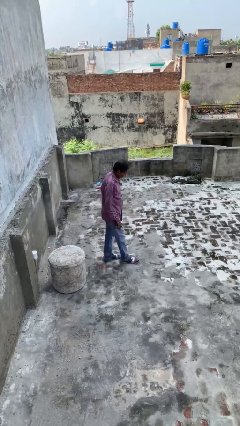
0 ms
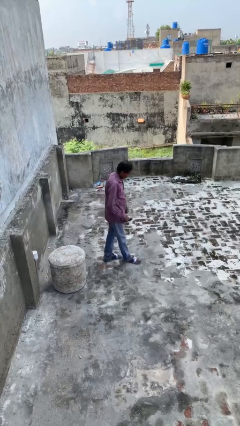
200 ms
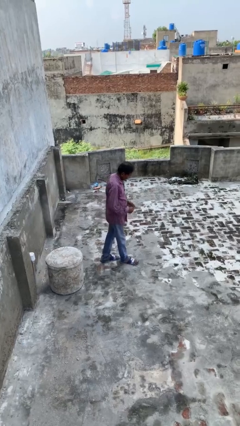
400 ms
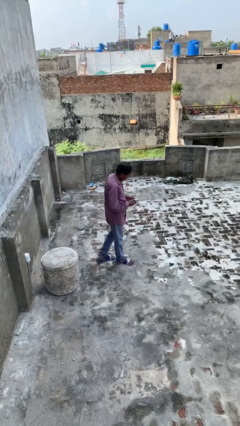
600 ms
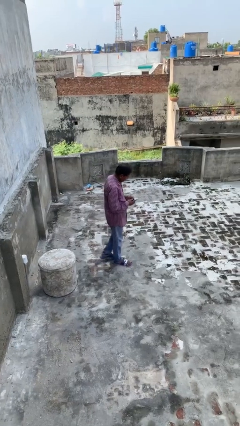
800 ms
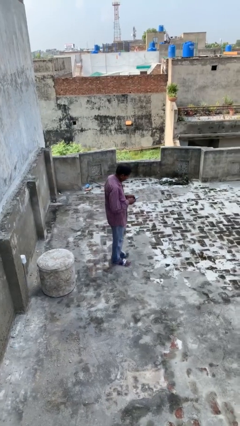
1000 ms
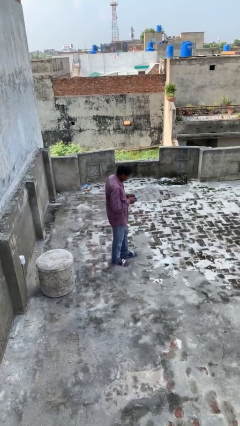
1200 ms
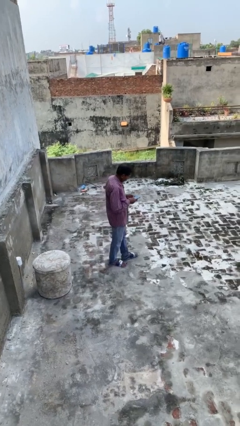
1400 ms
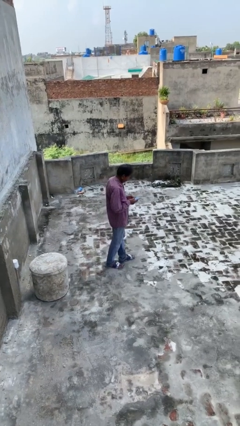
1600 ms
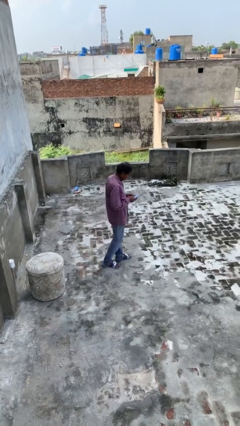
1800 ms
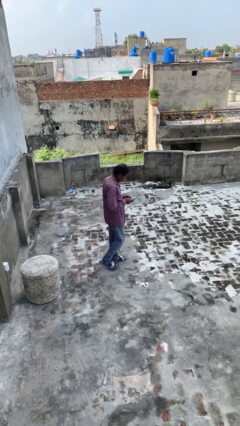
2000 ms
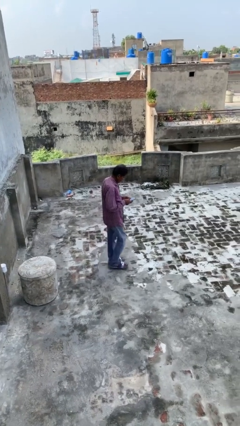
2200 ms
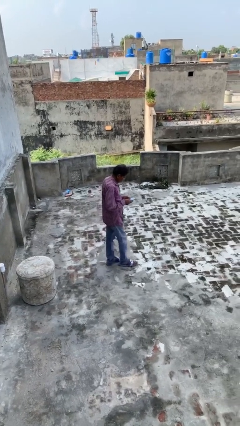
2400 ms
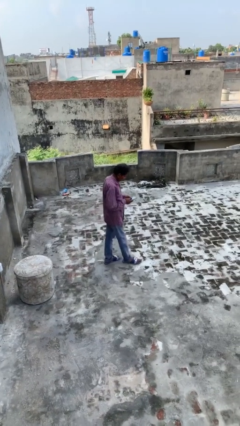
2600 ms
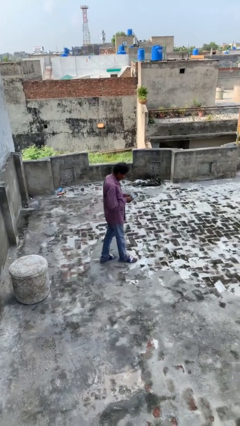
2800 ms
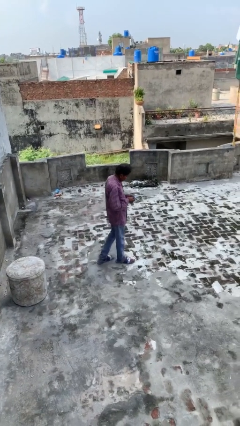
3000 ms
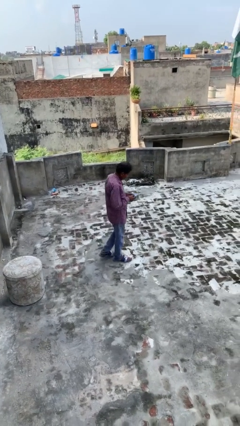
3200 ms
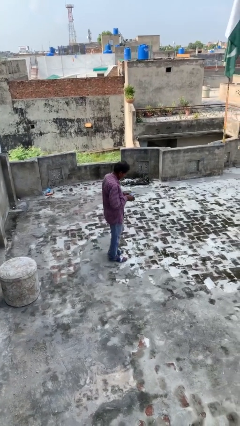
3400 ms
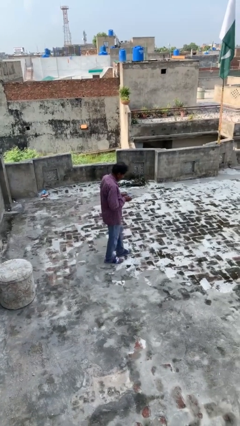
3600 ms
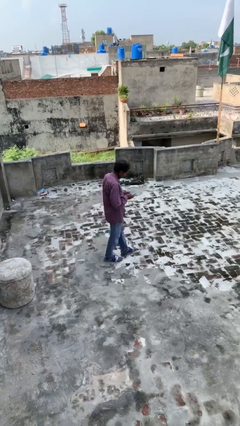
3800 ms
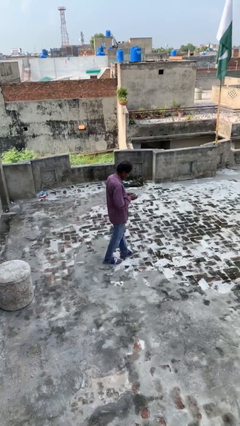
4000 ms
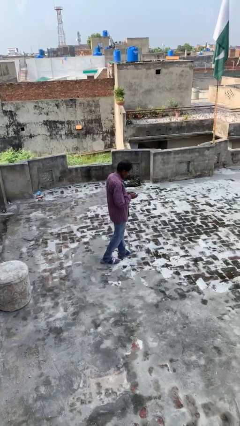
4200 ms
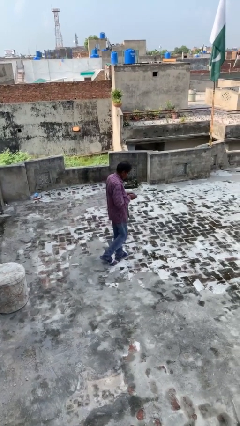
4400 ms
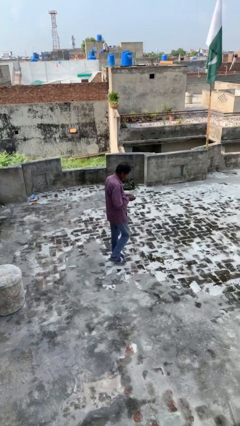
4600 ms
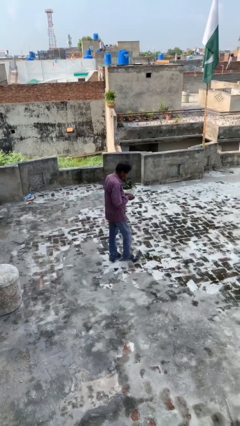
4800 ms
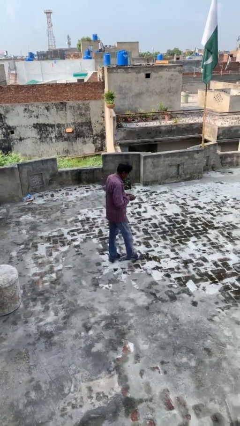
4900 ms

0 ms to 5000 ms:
person texts on phone

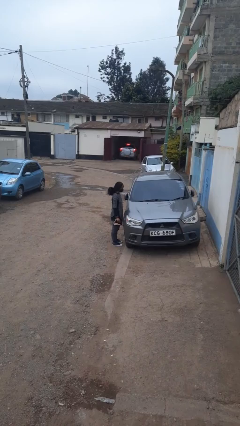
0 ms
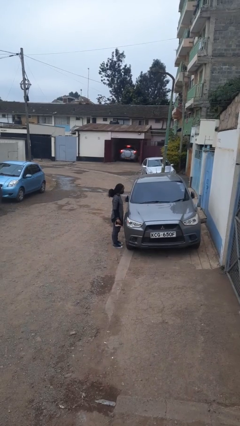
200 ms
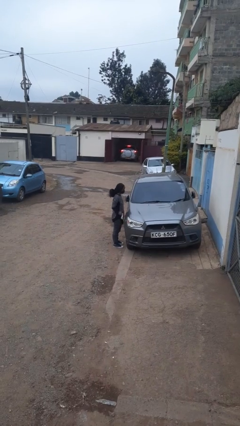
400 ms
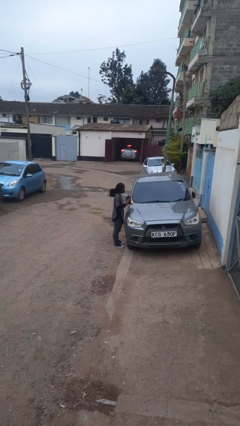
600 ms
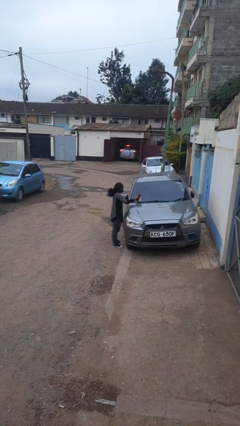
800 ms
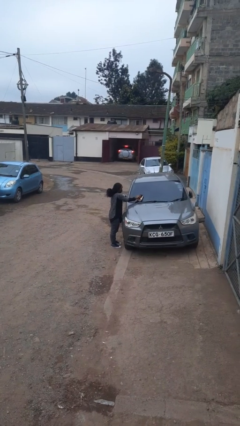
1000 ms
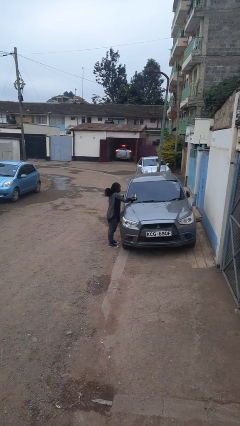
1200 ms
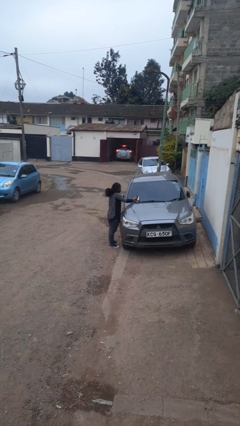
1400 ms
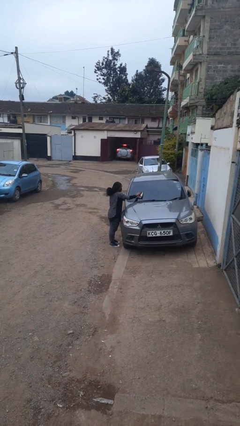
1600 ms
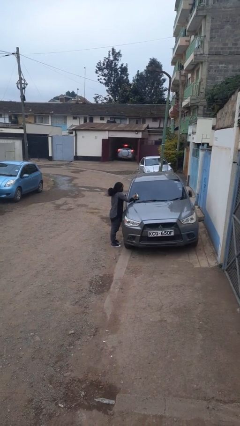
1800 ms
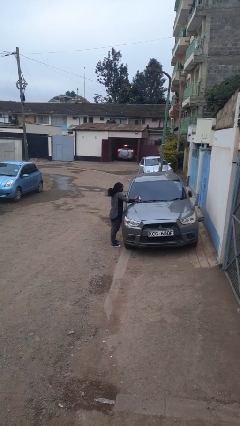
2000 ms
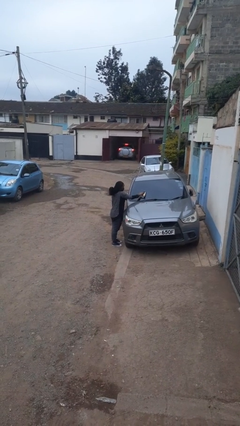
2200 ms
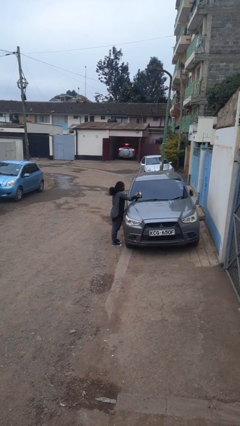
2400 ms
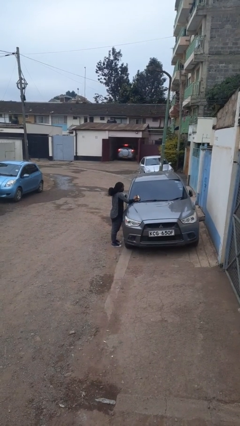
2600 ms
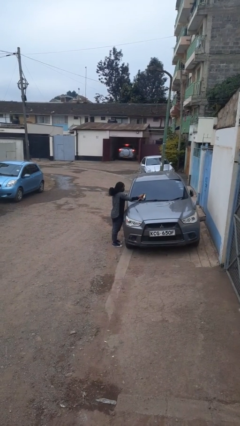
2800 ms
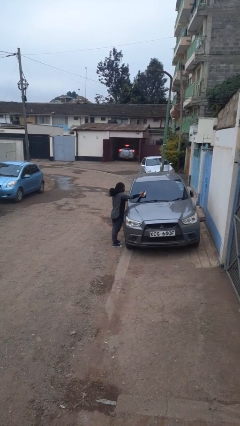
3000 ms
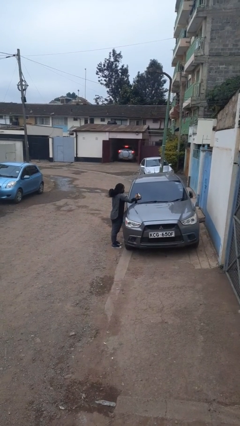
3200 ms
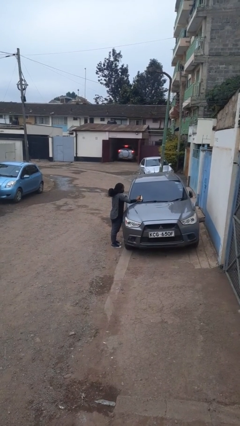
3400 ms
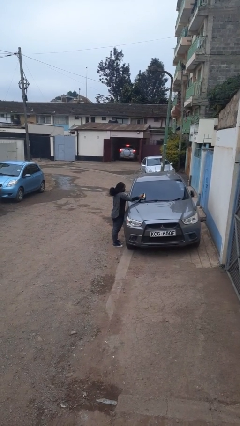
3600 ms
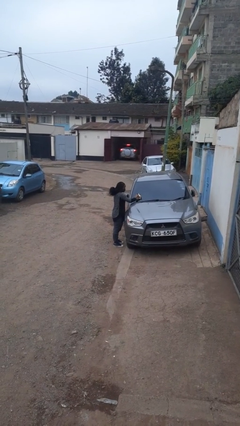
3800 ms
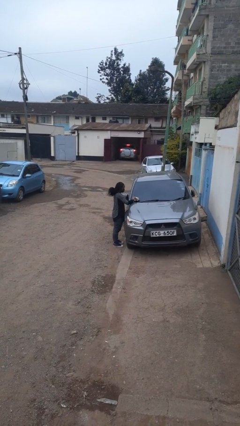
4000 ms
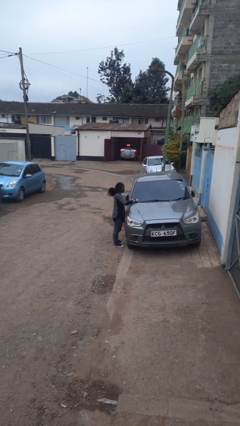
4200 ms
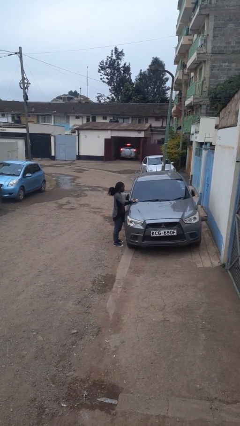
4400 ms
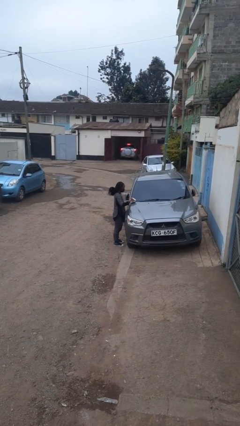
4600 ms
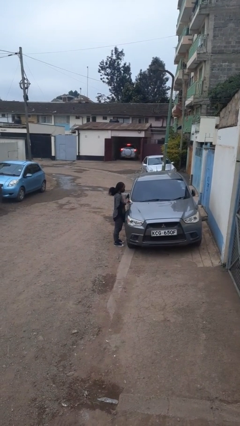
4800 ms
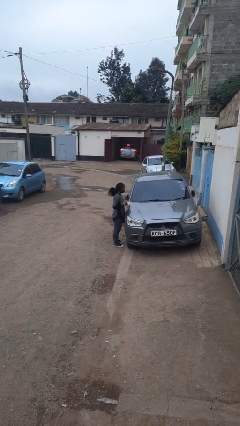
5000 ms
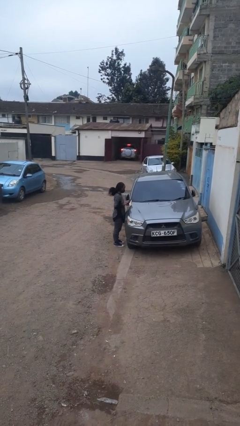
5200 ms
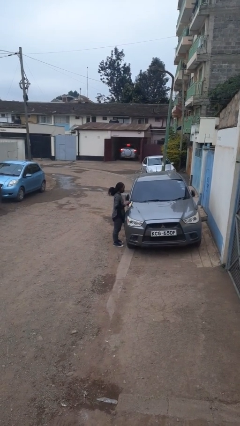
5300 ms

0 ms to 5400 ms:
person polishes car with rag

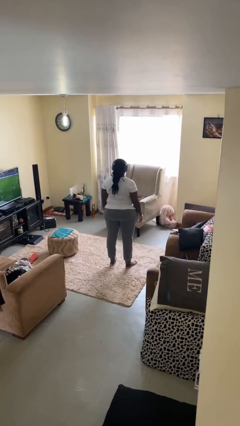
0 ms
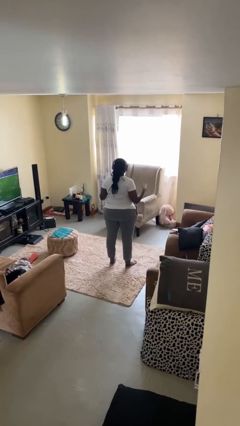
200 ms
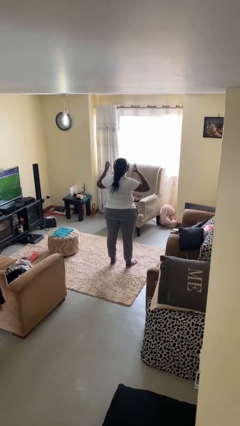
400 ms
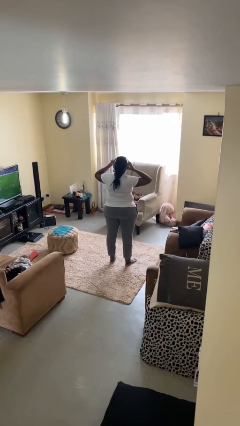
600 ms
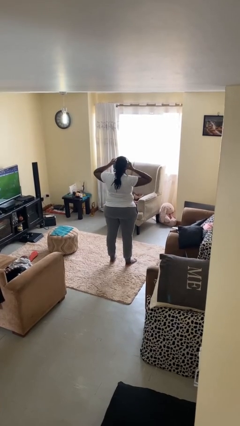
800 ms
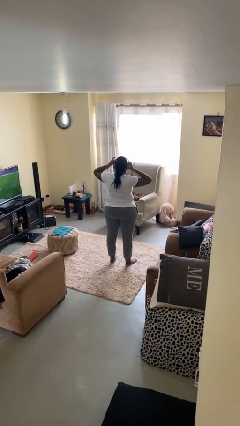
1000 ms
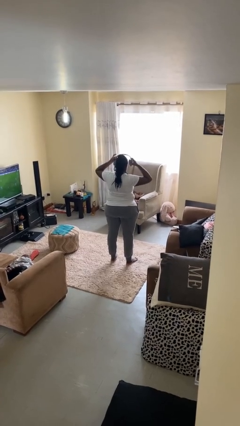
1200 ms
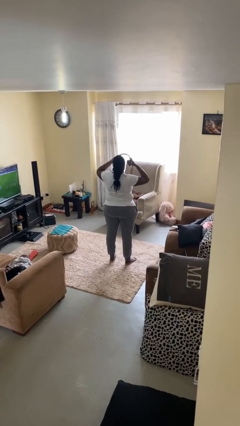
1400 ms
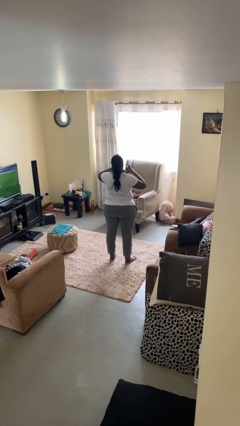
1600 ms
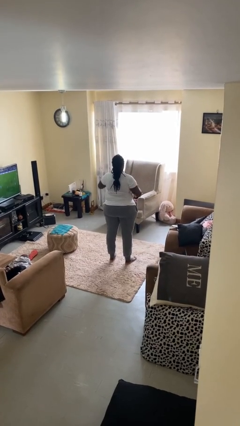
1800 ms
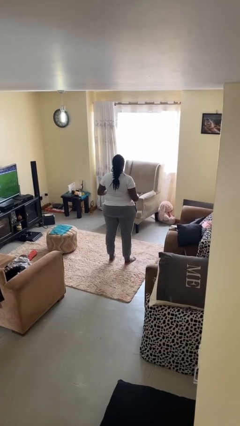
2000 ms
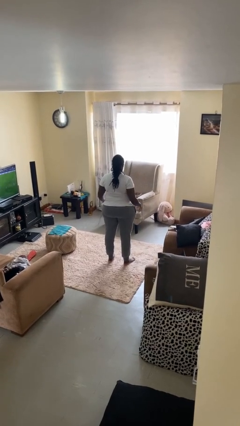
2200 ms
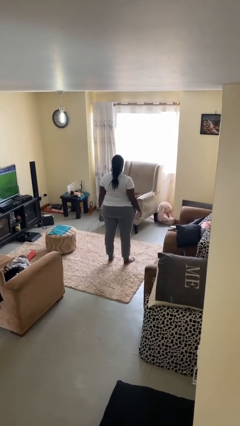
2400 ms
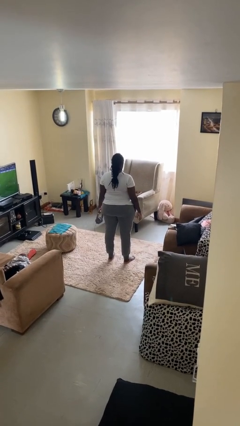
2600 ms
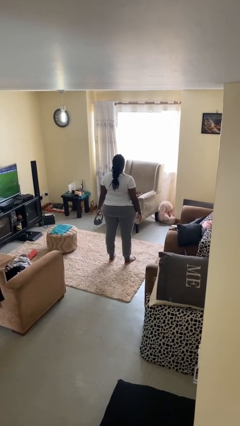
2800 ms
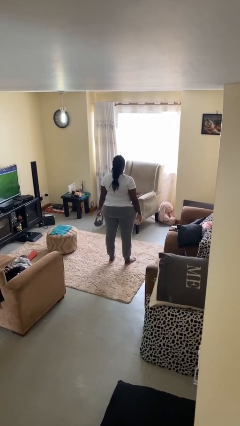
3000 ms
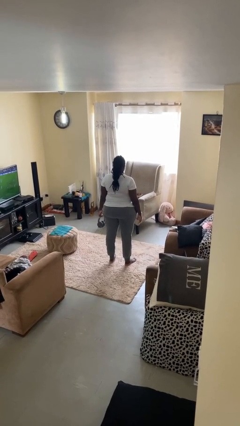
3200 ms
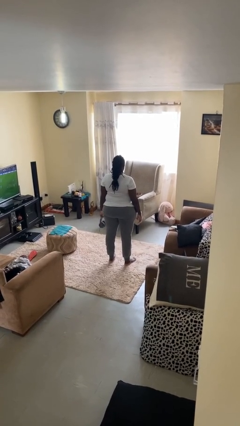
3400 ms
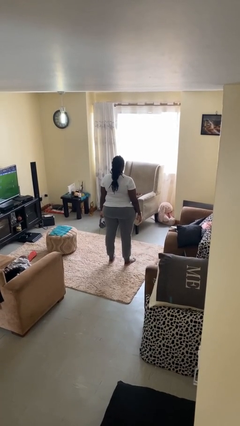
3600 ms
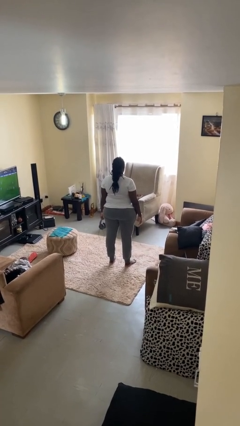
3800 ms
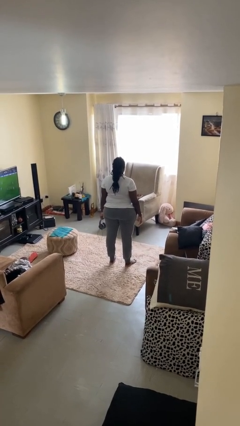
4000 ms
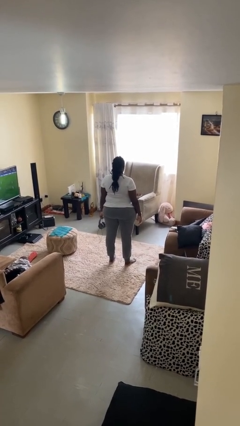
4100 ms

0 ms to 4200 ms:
person takes off headphones

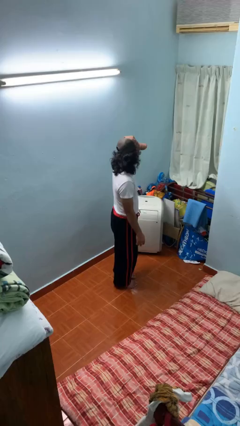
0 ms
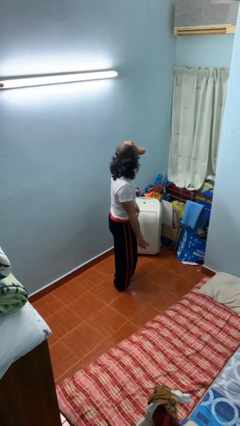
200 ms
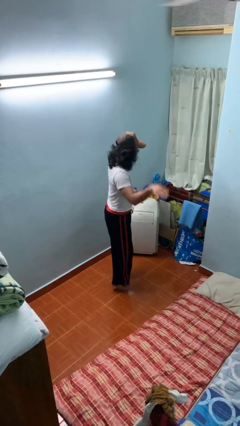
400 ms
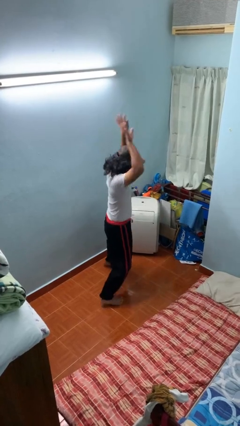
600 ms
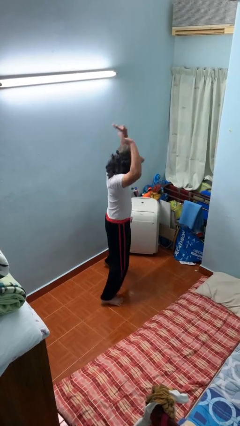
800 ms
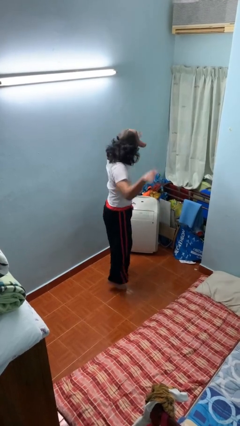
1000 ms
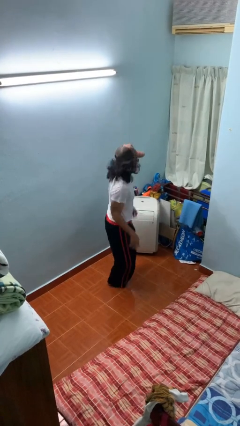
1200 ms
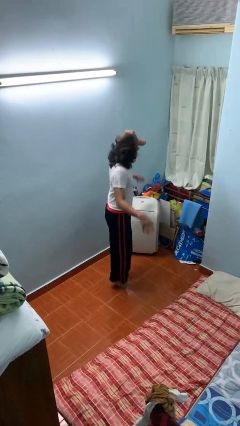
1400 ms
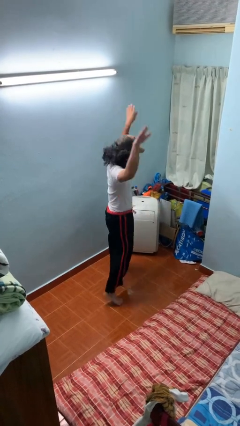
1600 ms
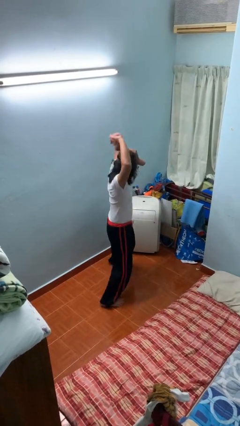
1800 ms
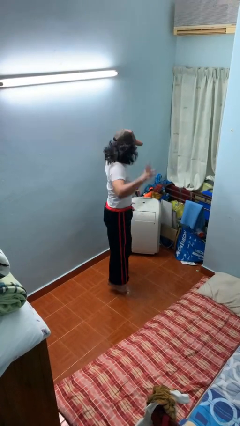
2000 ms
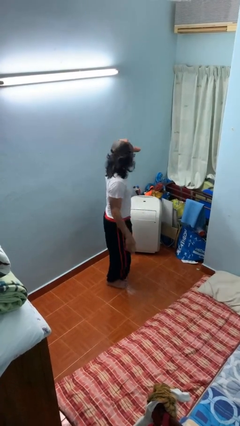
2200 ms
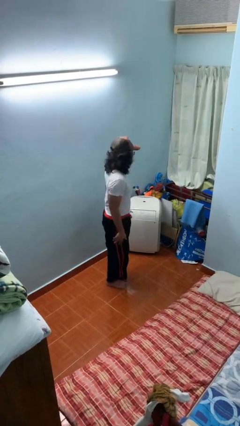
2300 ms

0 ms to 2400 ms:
person exercises with jumping jacks

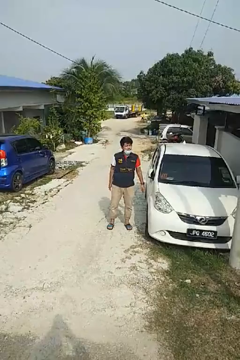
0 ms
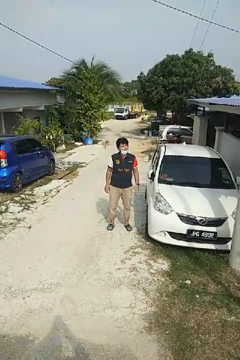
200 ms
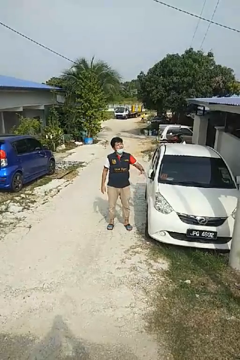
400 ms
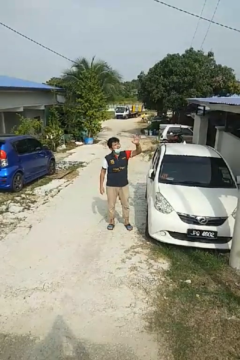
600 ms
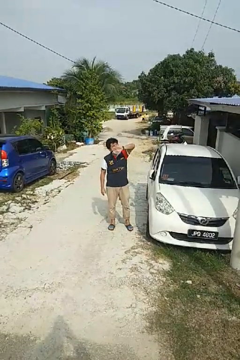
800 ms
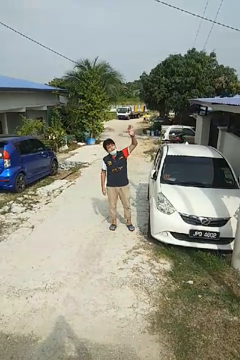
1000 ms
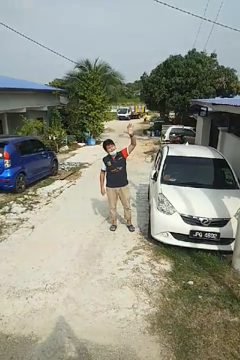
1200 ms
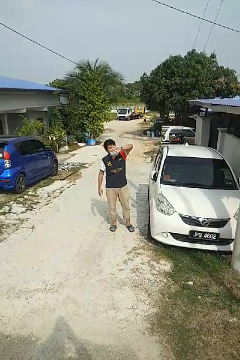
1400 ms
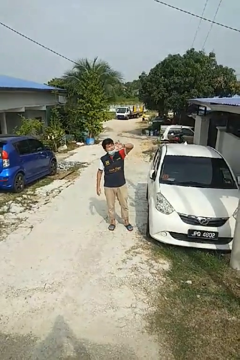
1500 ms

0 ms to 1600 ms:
person waves at person
